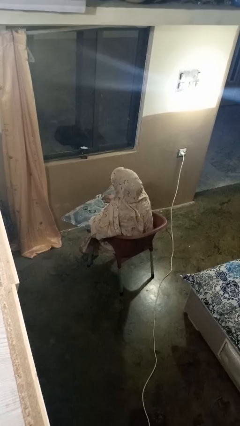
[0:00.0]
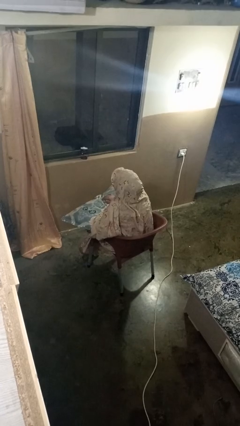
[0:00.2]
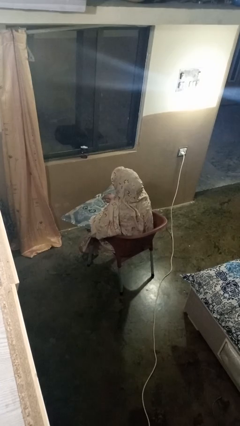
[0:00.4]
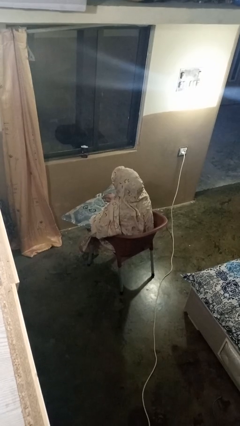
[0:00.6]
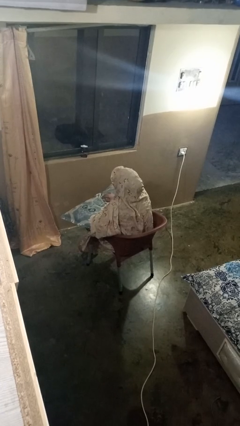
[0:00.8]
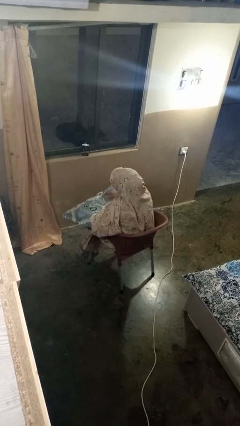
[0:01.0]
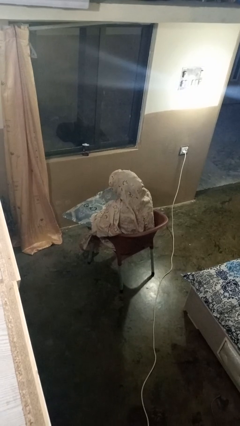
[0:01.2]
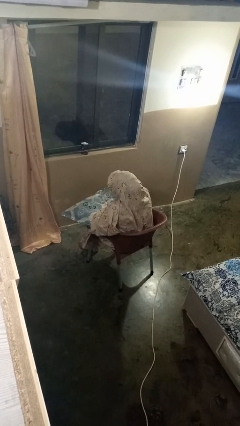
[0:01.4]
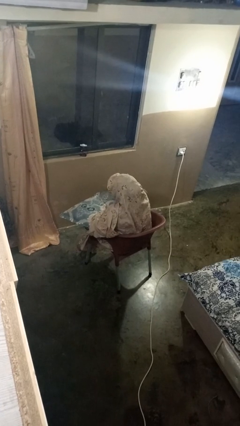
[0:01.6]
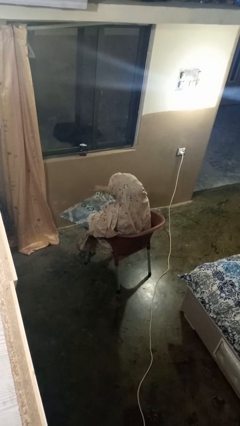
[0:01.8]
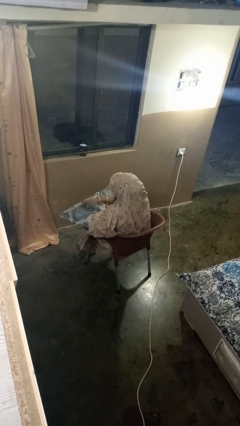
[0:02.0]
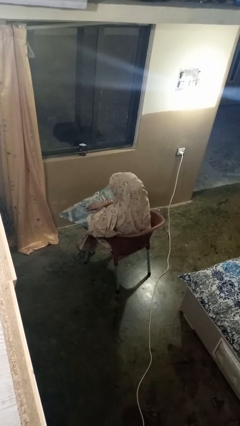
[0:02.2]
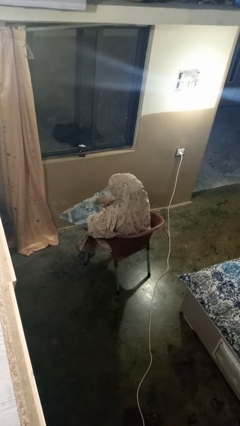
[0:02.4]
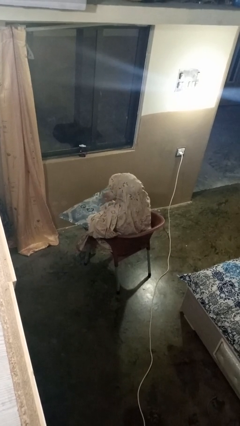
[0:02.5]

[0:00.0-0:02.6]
person waves hand over object

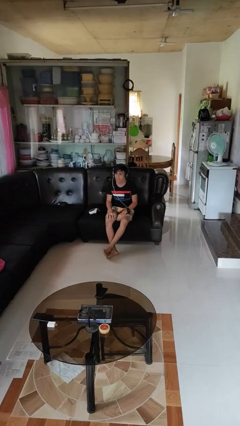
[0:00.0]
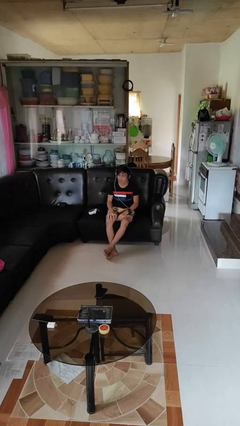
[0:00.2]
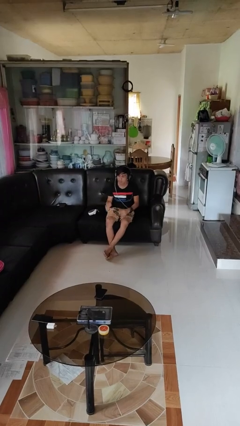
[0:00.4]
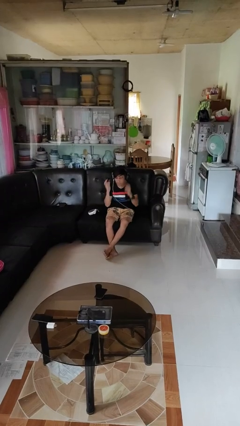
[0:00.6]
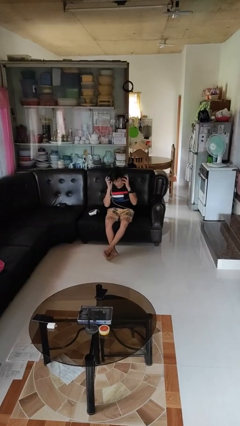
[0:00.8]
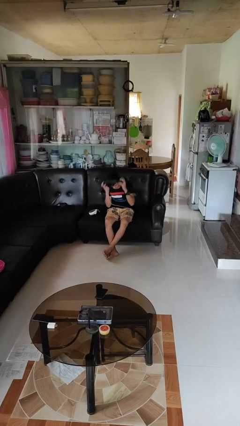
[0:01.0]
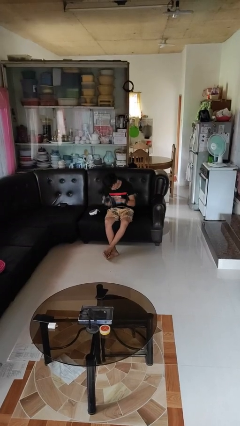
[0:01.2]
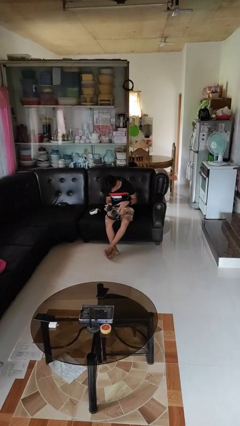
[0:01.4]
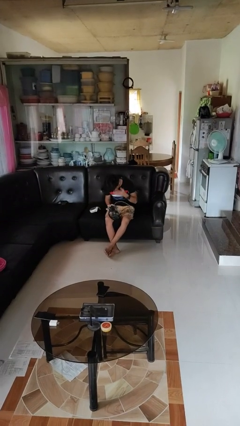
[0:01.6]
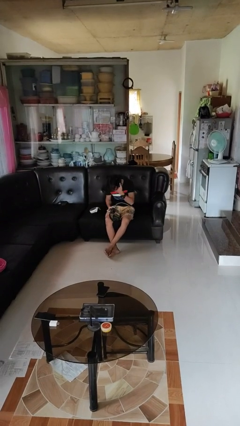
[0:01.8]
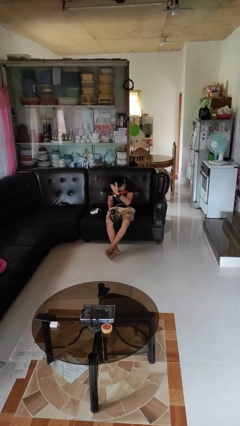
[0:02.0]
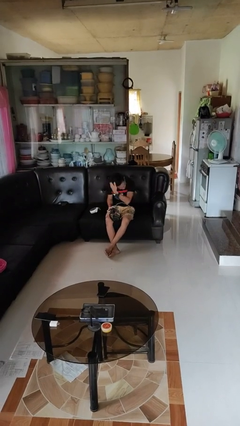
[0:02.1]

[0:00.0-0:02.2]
person takes off headphones

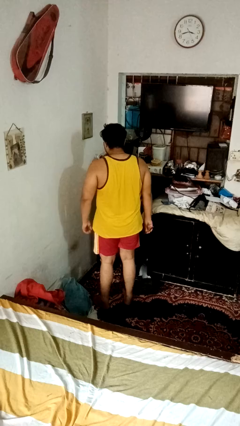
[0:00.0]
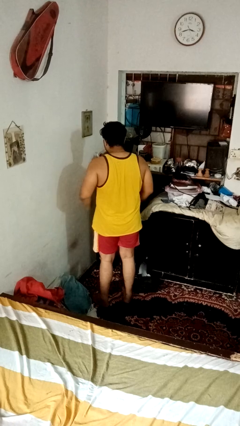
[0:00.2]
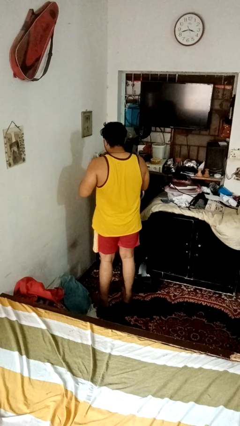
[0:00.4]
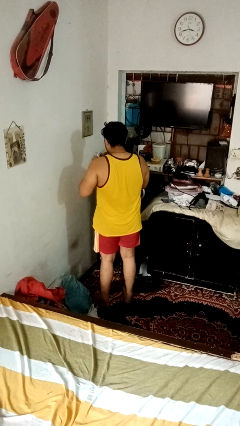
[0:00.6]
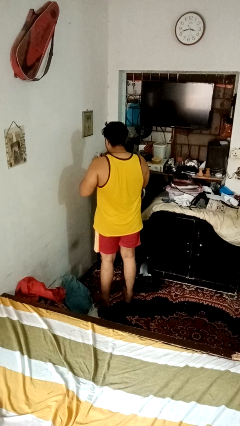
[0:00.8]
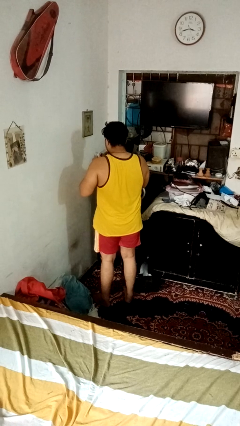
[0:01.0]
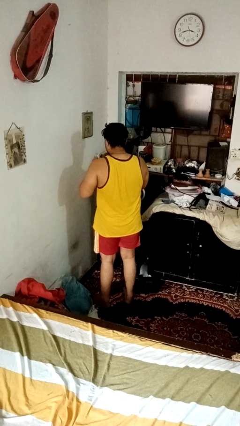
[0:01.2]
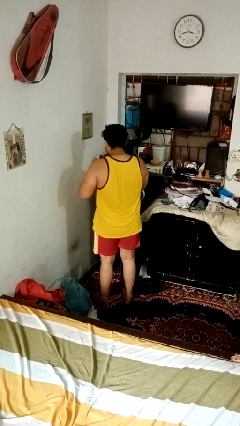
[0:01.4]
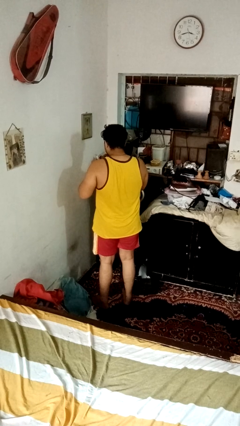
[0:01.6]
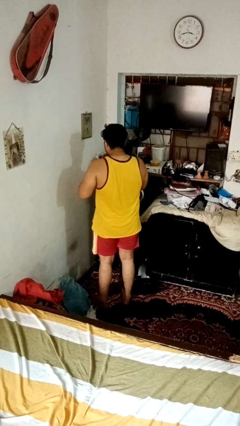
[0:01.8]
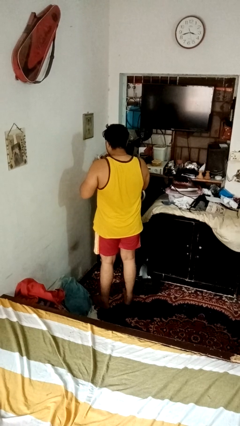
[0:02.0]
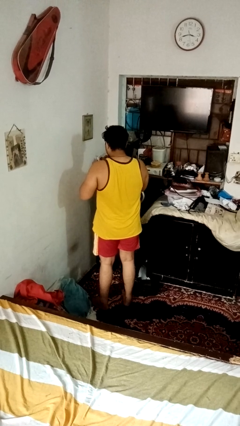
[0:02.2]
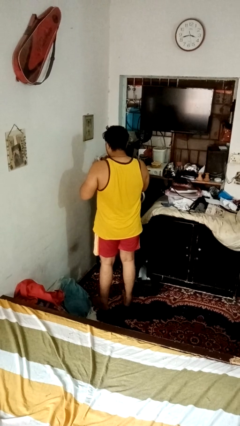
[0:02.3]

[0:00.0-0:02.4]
person files fingernails

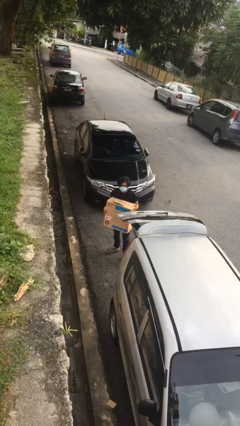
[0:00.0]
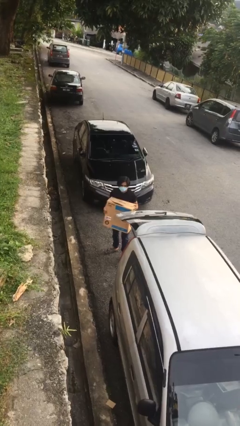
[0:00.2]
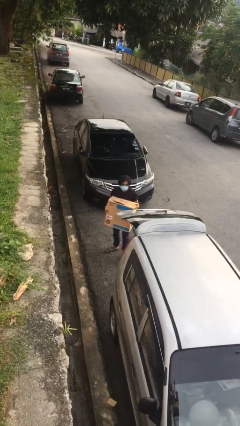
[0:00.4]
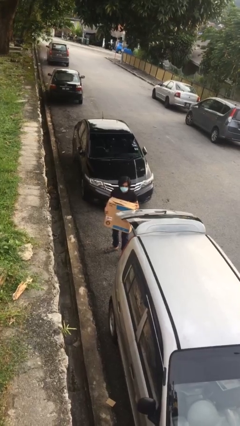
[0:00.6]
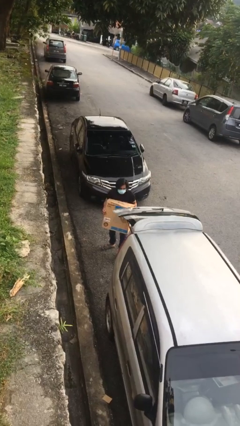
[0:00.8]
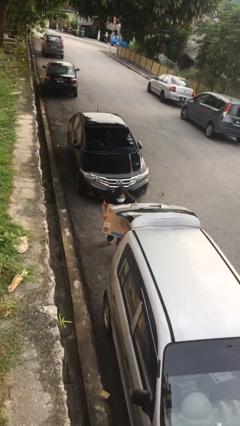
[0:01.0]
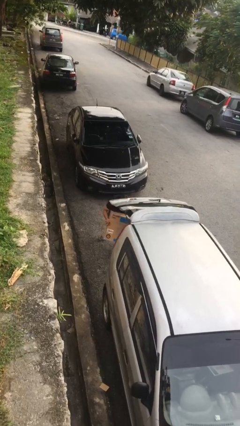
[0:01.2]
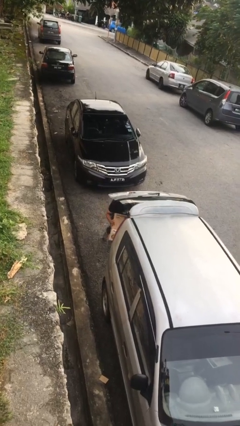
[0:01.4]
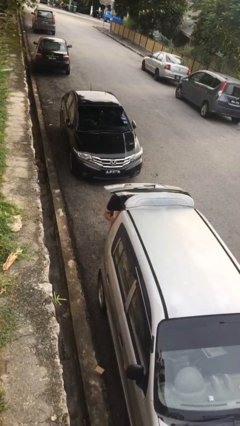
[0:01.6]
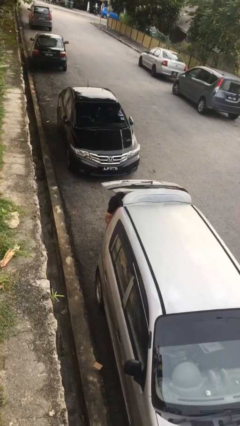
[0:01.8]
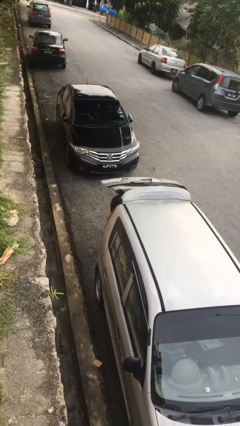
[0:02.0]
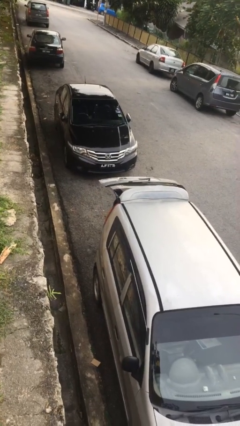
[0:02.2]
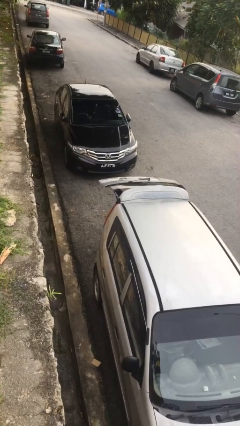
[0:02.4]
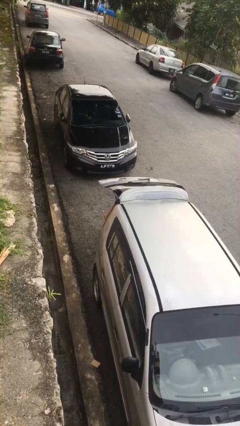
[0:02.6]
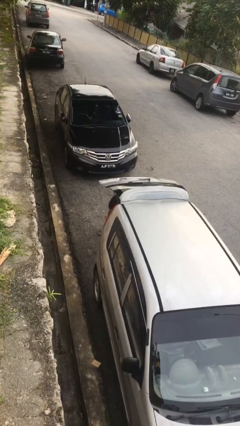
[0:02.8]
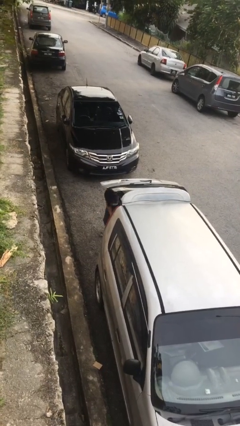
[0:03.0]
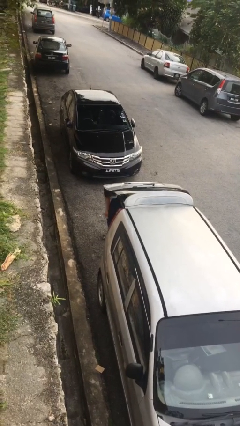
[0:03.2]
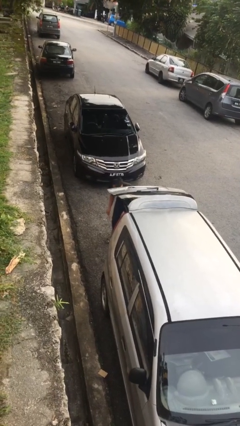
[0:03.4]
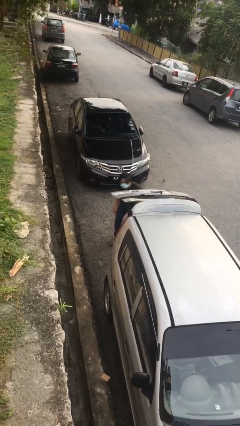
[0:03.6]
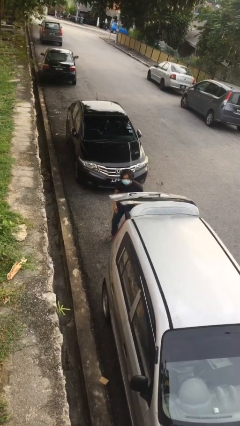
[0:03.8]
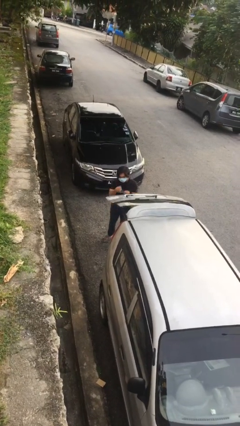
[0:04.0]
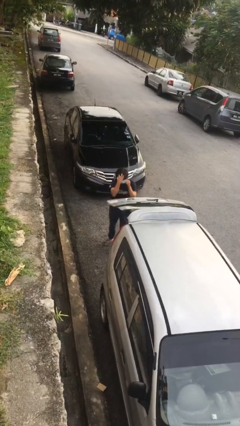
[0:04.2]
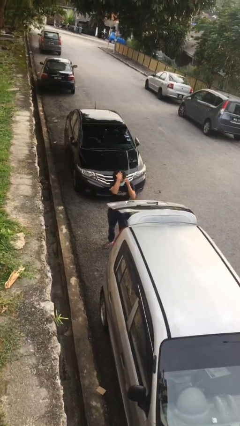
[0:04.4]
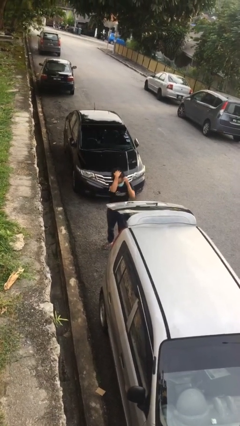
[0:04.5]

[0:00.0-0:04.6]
person loads car

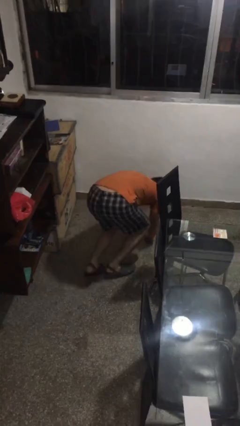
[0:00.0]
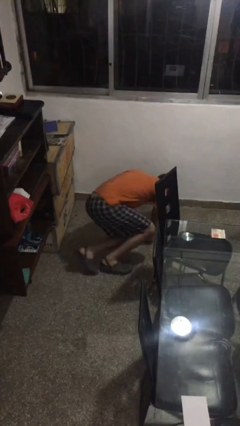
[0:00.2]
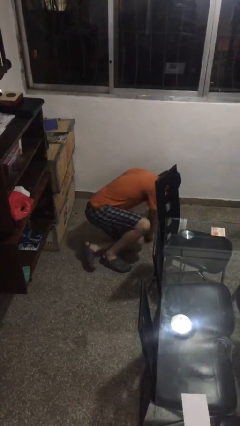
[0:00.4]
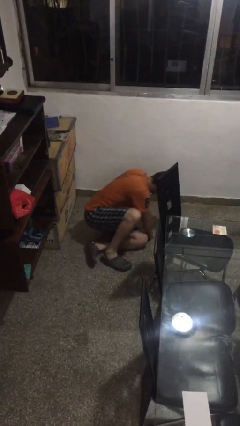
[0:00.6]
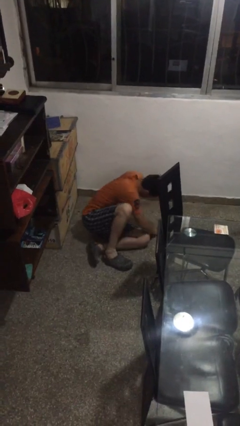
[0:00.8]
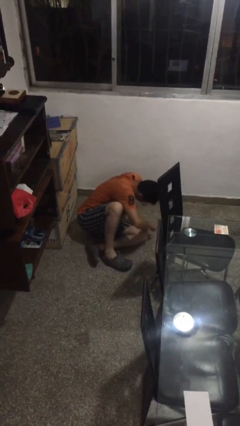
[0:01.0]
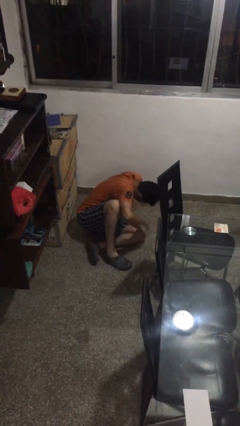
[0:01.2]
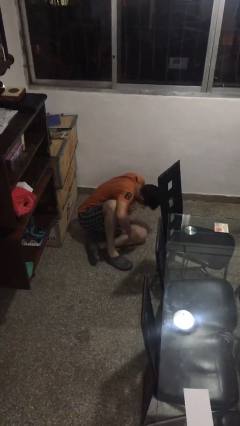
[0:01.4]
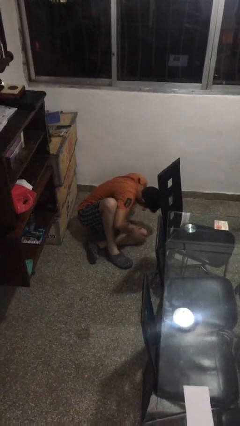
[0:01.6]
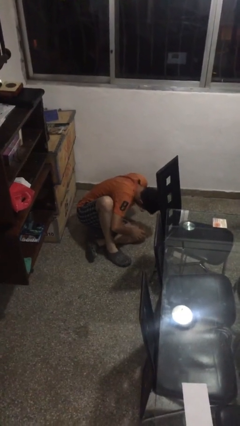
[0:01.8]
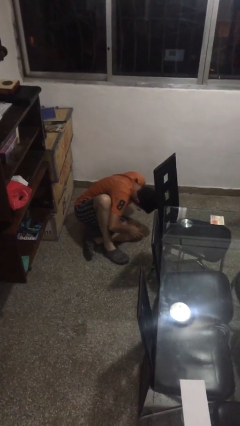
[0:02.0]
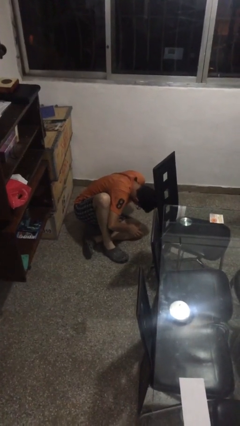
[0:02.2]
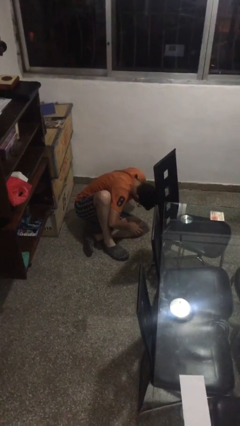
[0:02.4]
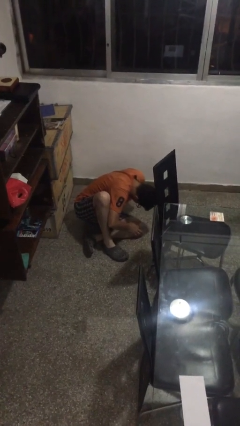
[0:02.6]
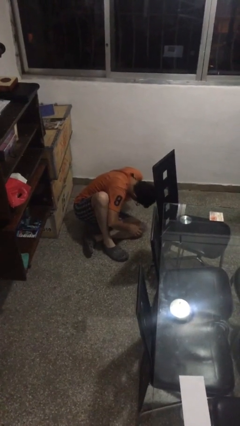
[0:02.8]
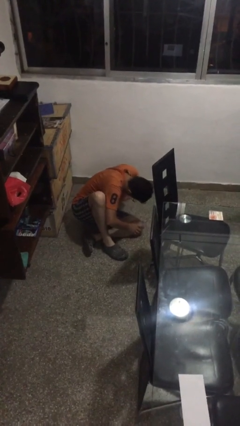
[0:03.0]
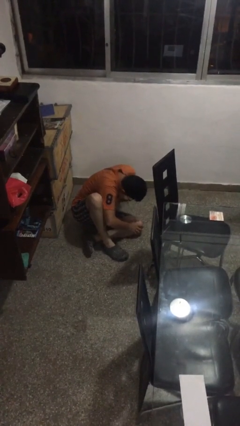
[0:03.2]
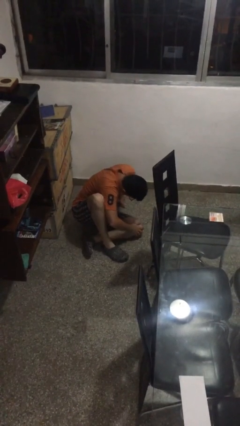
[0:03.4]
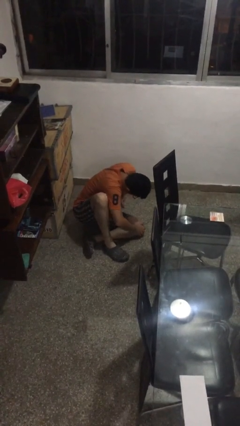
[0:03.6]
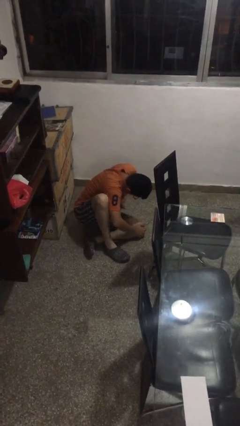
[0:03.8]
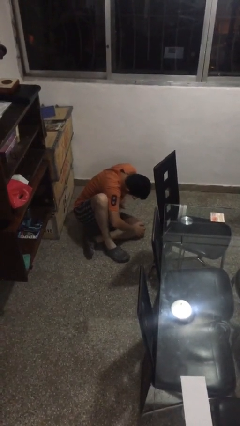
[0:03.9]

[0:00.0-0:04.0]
person lies down on floor

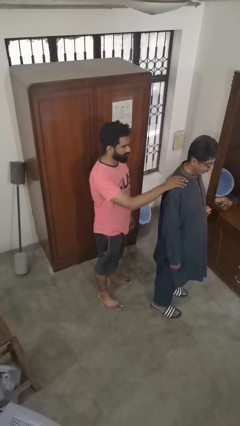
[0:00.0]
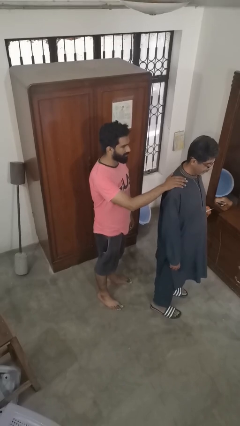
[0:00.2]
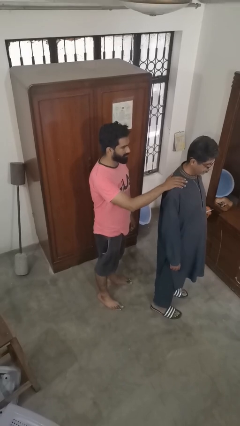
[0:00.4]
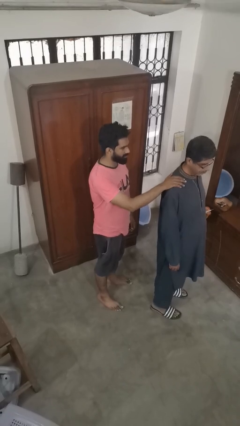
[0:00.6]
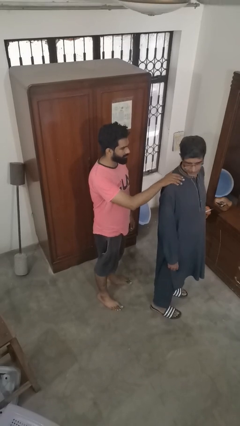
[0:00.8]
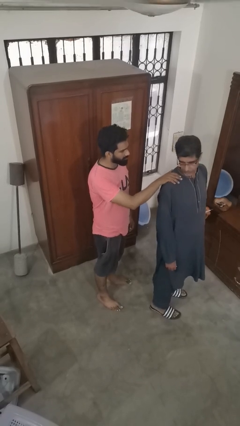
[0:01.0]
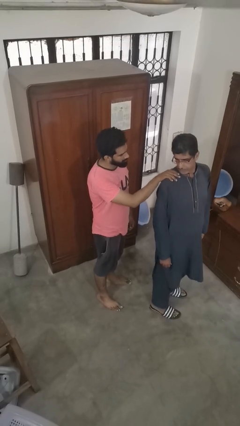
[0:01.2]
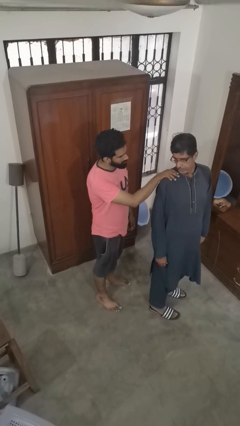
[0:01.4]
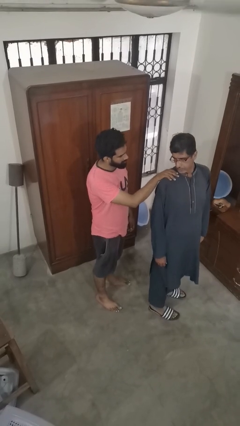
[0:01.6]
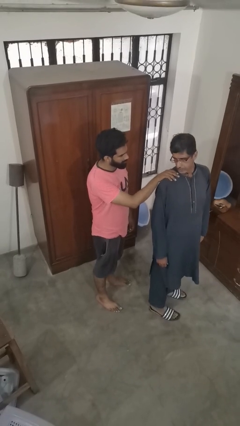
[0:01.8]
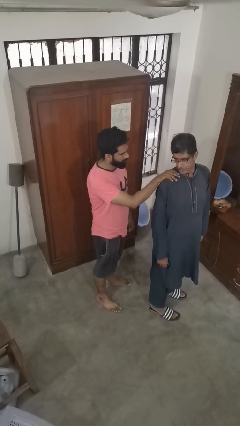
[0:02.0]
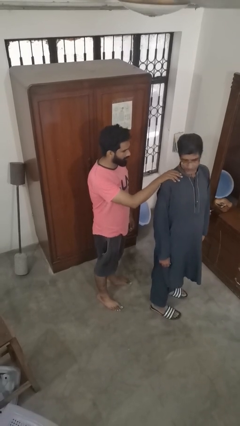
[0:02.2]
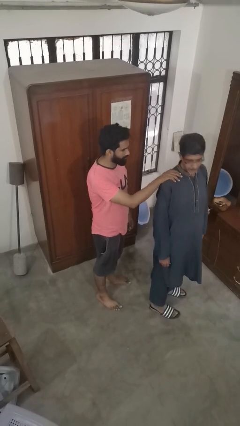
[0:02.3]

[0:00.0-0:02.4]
person spins person around
